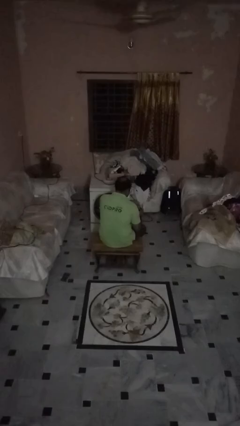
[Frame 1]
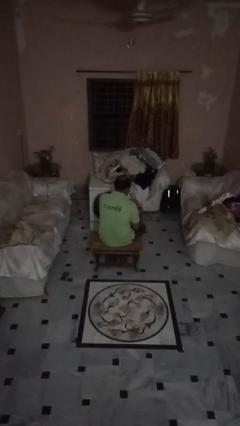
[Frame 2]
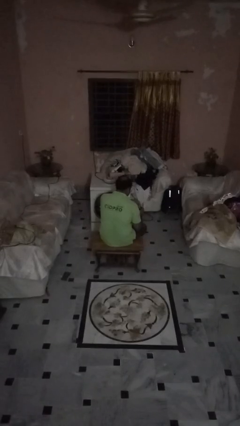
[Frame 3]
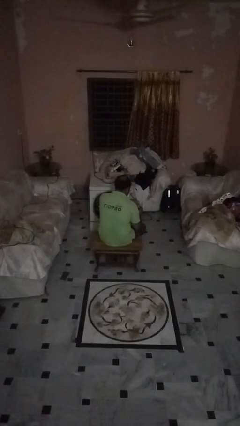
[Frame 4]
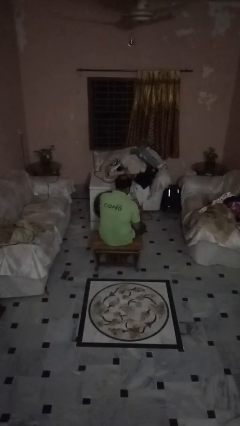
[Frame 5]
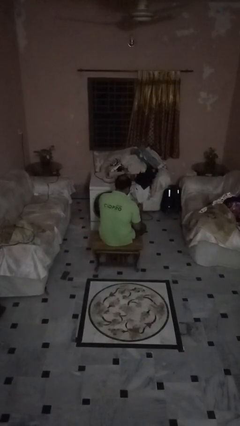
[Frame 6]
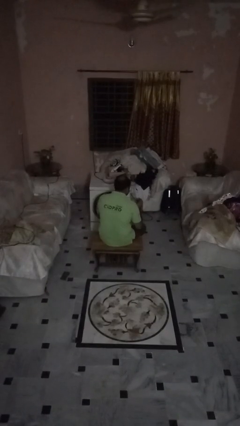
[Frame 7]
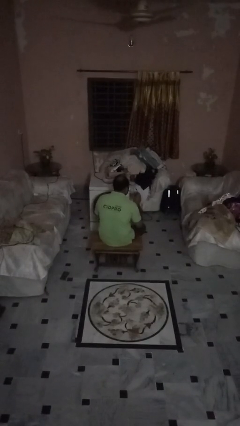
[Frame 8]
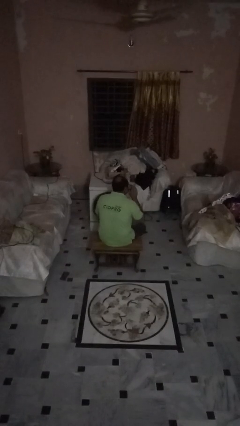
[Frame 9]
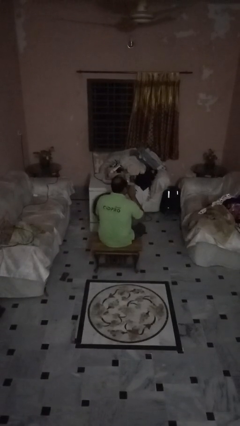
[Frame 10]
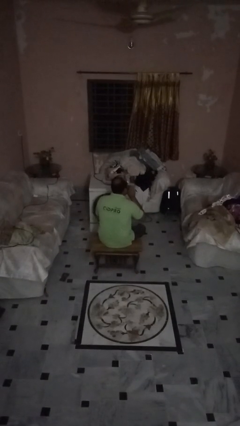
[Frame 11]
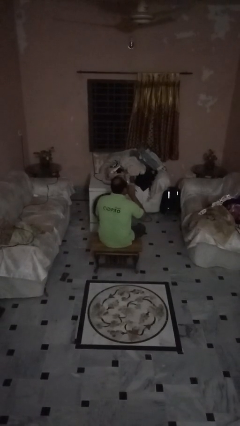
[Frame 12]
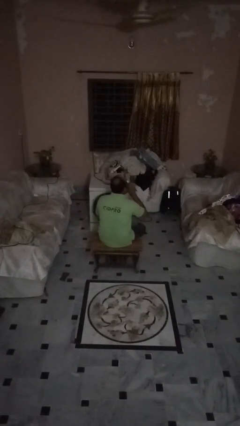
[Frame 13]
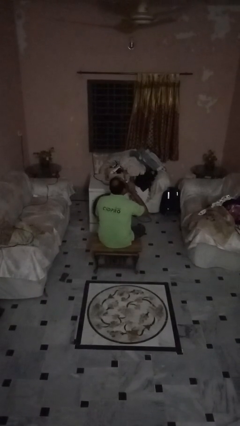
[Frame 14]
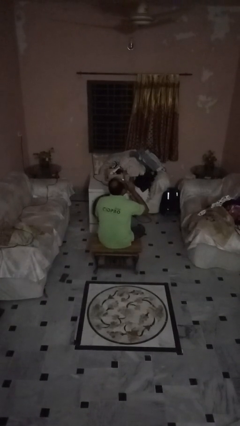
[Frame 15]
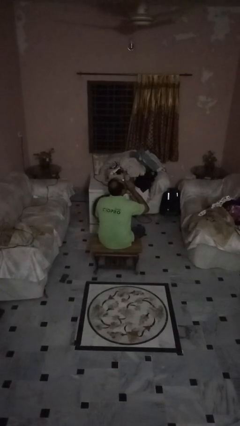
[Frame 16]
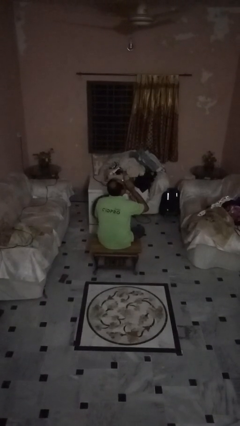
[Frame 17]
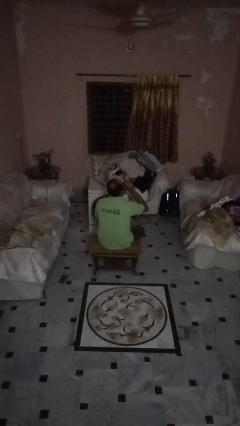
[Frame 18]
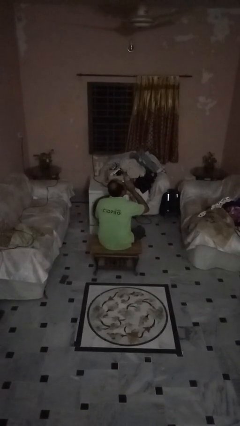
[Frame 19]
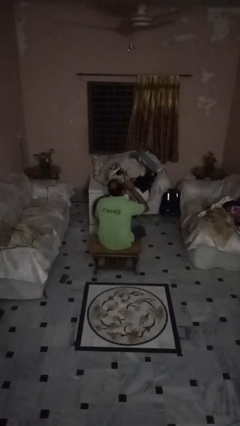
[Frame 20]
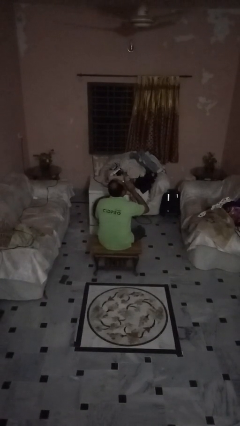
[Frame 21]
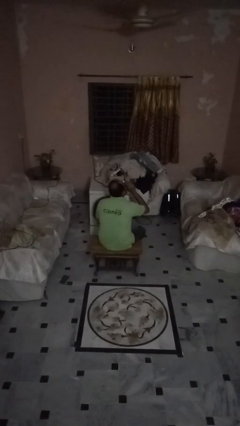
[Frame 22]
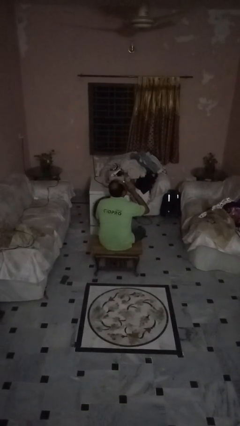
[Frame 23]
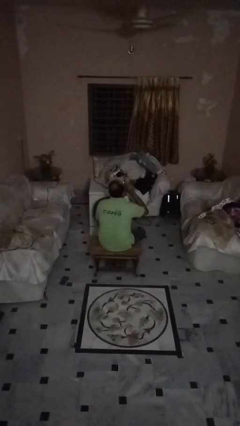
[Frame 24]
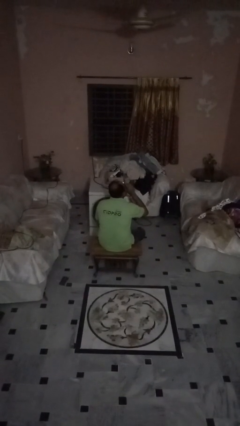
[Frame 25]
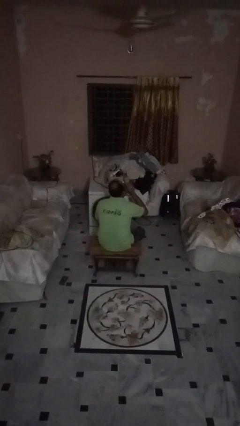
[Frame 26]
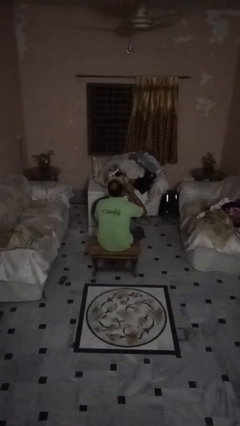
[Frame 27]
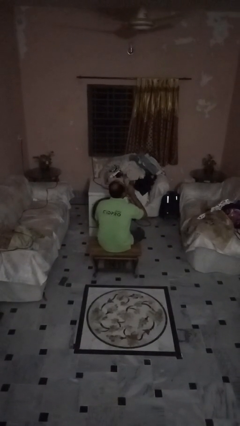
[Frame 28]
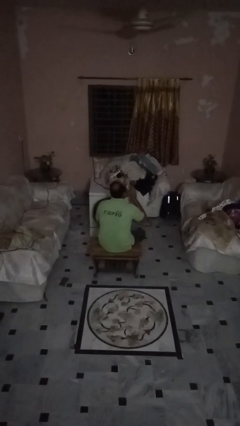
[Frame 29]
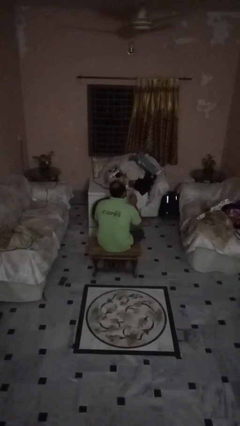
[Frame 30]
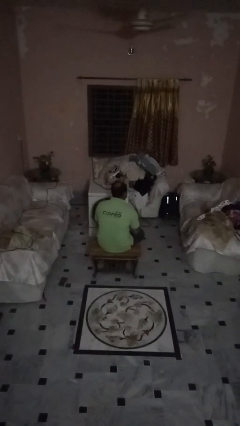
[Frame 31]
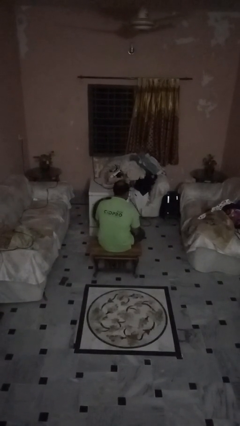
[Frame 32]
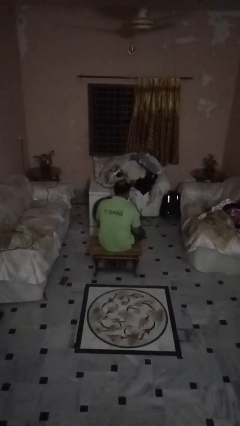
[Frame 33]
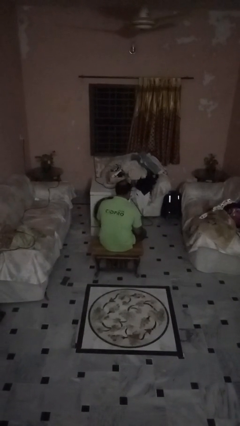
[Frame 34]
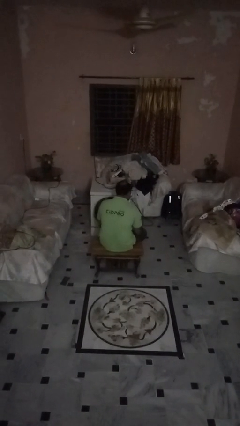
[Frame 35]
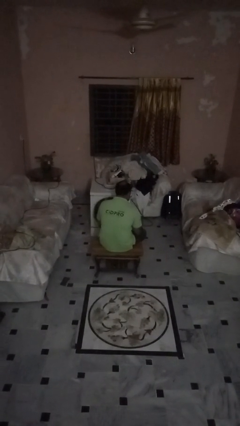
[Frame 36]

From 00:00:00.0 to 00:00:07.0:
person drinks from beverage can

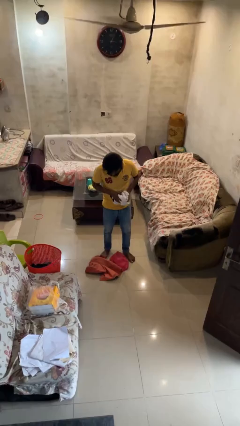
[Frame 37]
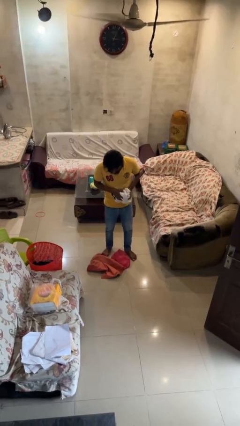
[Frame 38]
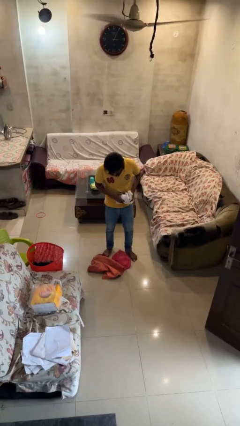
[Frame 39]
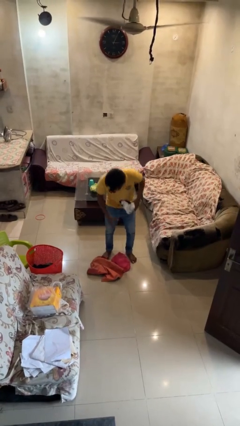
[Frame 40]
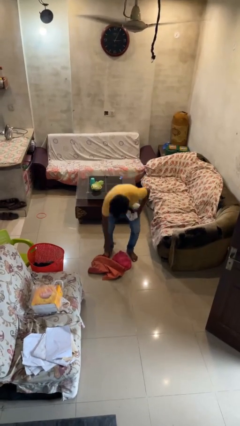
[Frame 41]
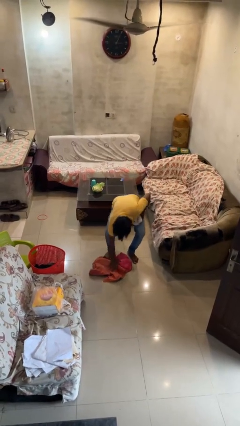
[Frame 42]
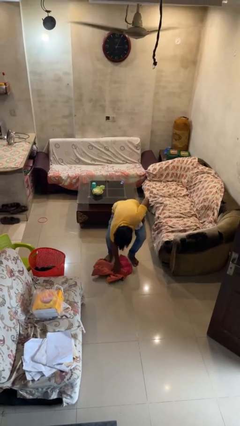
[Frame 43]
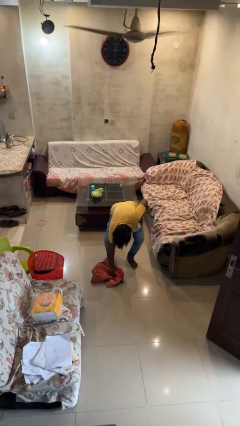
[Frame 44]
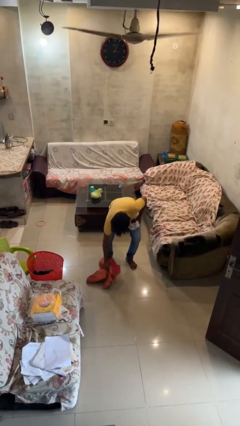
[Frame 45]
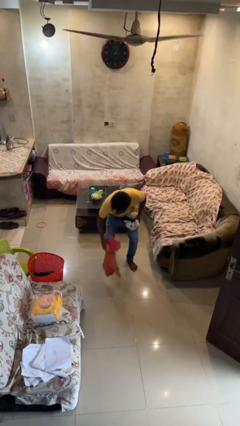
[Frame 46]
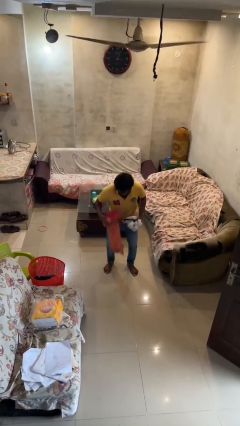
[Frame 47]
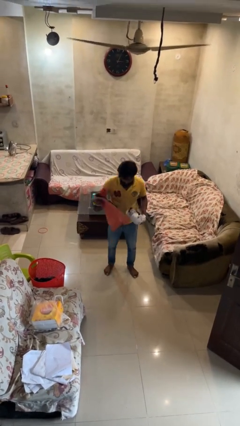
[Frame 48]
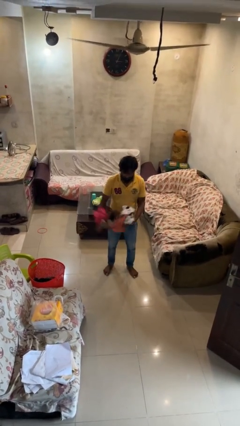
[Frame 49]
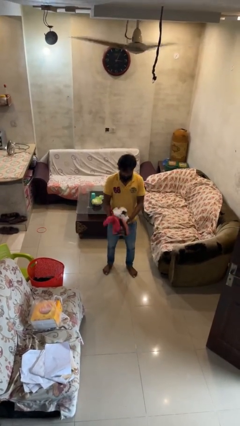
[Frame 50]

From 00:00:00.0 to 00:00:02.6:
person picks up object from floor

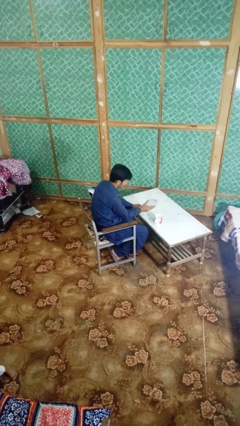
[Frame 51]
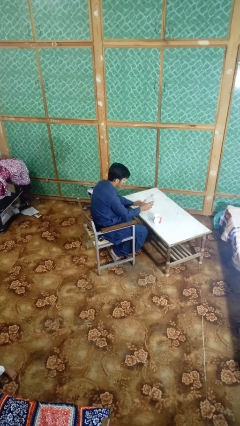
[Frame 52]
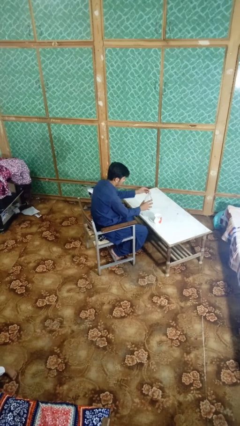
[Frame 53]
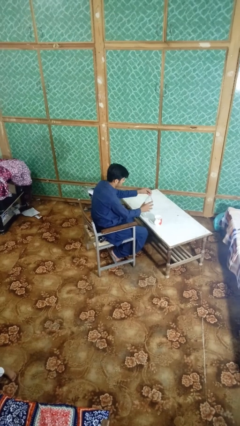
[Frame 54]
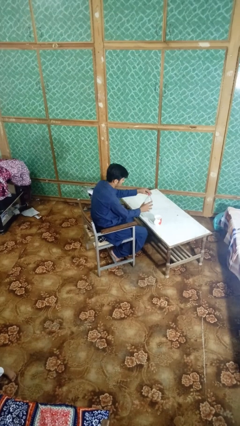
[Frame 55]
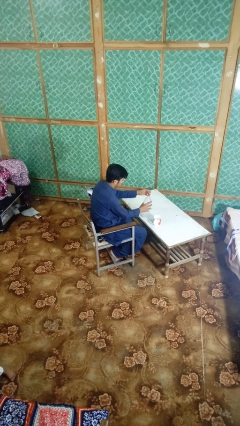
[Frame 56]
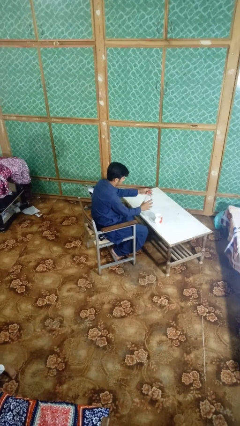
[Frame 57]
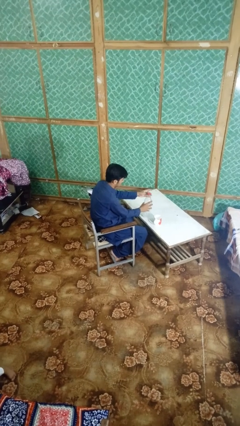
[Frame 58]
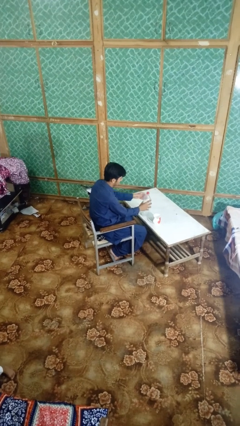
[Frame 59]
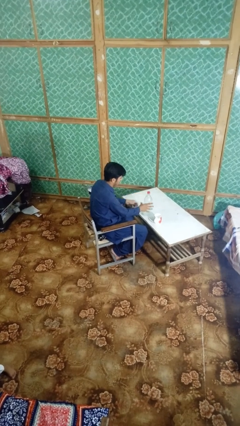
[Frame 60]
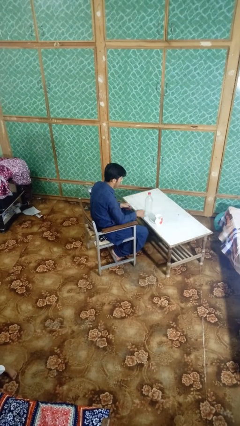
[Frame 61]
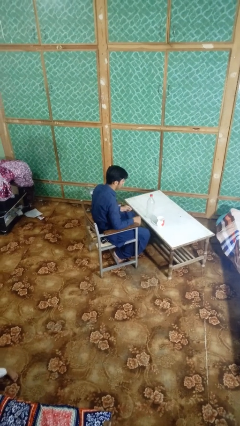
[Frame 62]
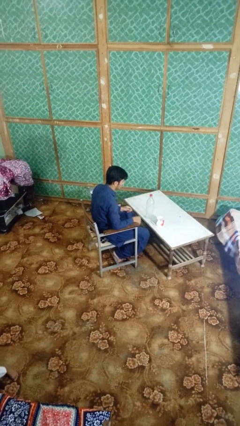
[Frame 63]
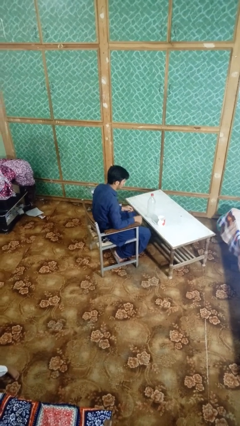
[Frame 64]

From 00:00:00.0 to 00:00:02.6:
person screws lid to bottle

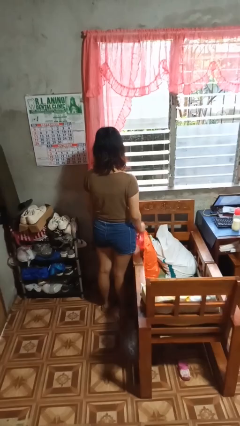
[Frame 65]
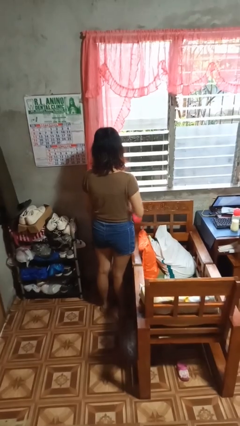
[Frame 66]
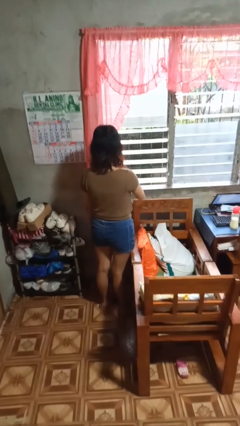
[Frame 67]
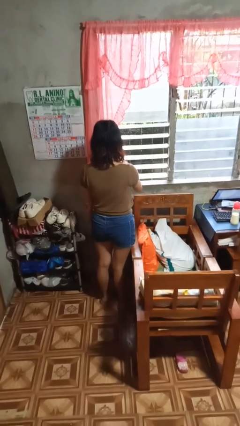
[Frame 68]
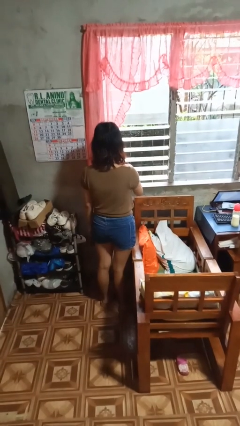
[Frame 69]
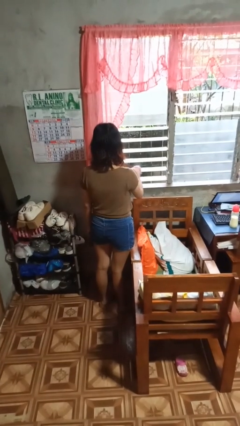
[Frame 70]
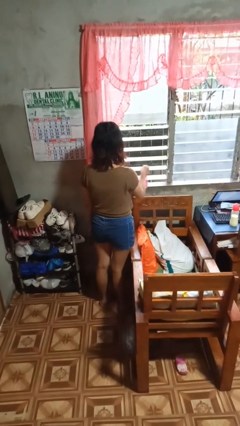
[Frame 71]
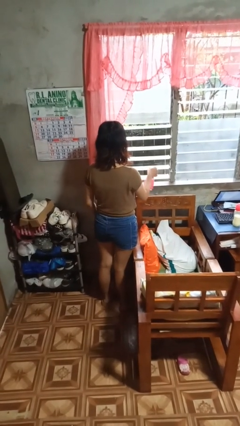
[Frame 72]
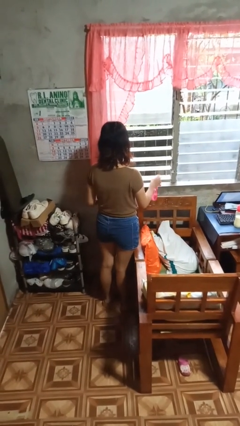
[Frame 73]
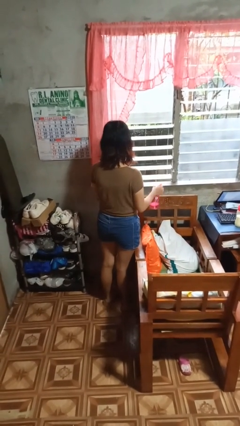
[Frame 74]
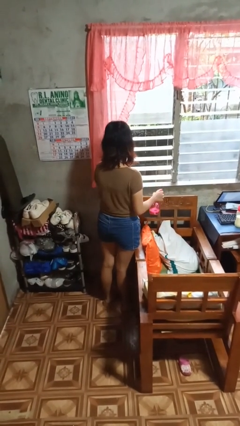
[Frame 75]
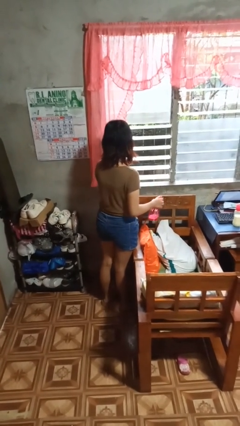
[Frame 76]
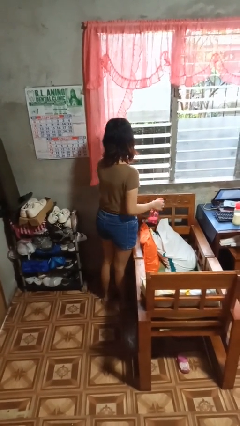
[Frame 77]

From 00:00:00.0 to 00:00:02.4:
person sprays from bottle

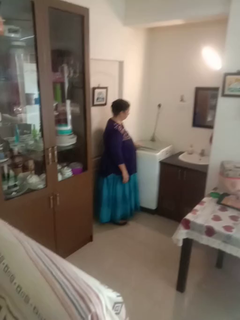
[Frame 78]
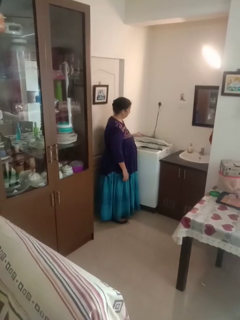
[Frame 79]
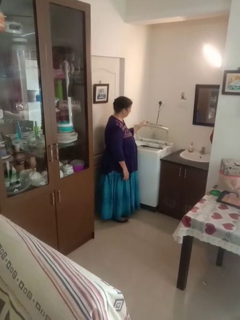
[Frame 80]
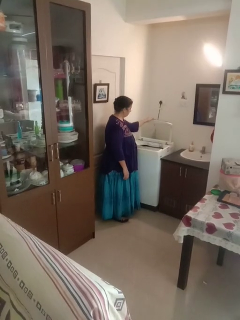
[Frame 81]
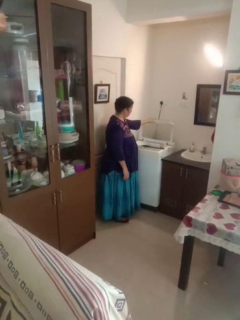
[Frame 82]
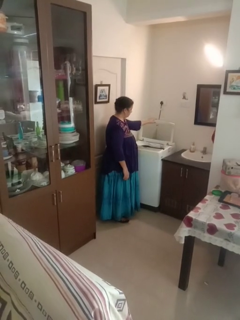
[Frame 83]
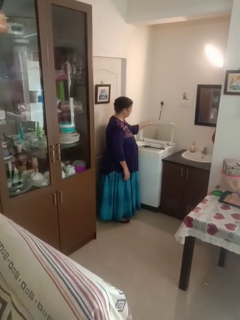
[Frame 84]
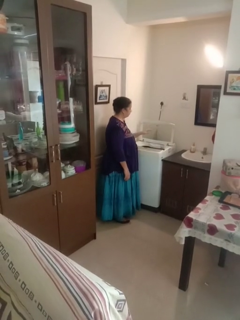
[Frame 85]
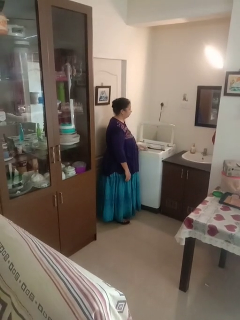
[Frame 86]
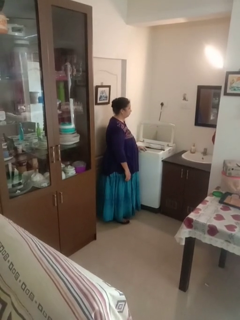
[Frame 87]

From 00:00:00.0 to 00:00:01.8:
person opens clothes washer

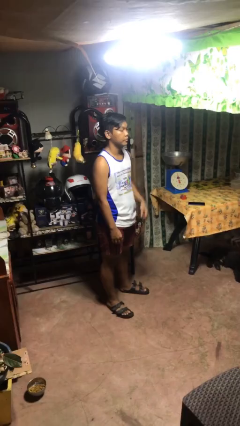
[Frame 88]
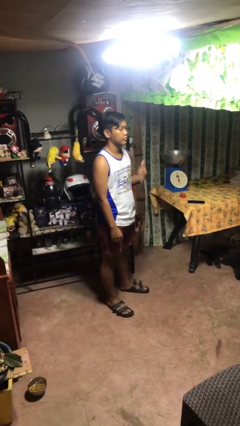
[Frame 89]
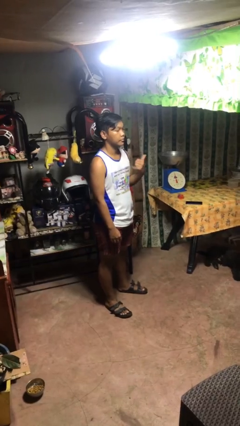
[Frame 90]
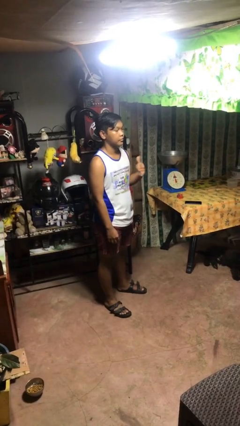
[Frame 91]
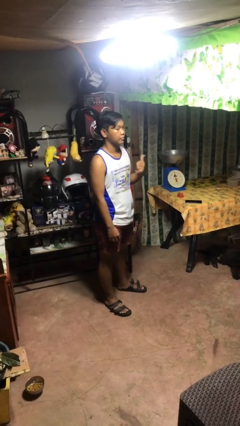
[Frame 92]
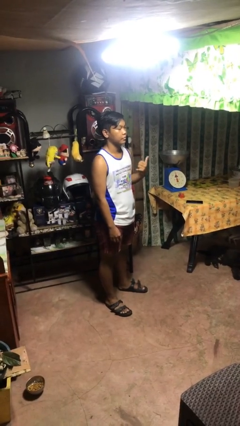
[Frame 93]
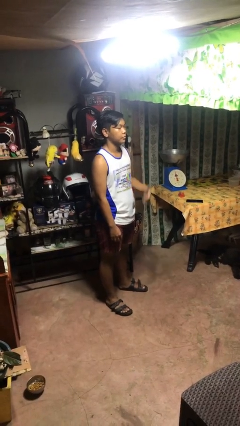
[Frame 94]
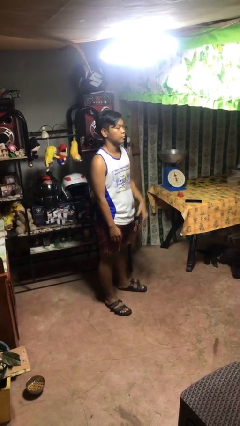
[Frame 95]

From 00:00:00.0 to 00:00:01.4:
person gestures hang loose
